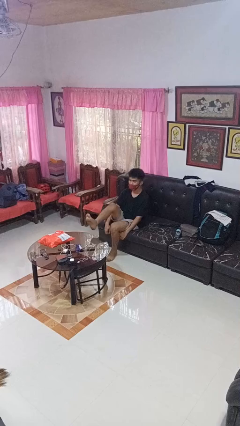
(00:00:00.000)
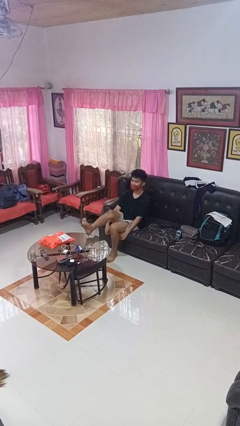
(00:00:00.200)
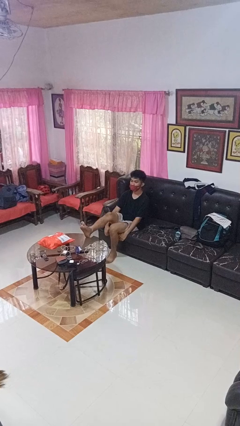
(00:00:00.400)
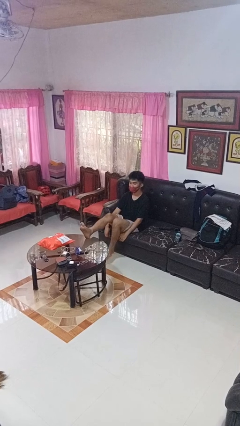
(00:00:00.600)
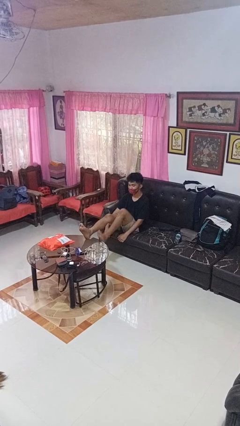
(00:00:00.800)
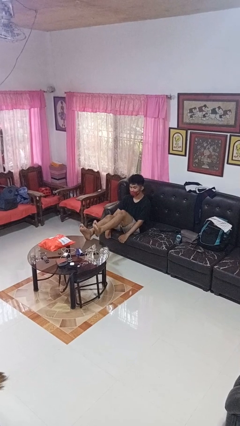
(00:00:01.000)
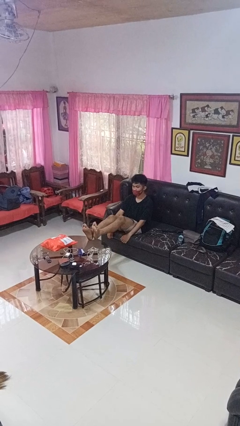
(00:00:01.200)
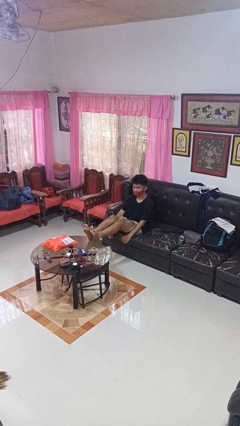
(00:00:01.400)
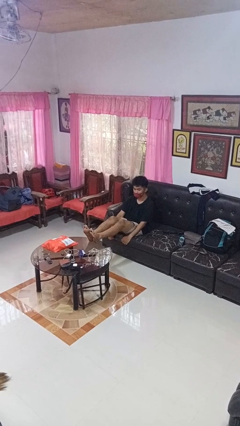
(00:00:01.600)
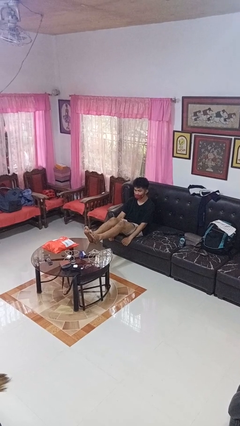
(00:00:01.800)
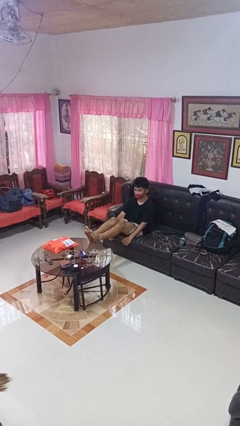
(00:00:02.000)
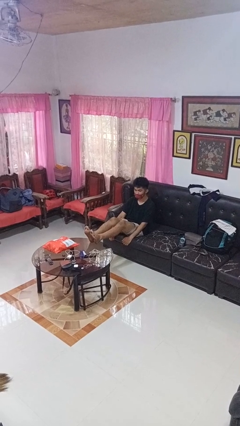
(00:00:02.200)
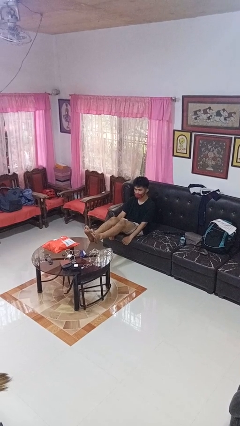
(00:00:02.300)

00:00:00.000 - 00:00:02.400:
person puts feet up

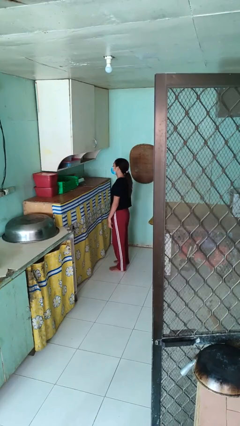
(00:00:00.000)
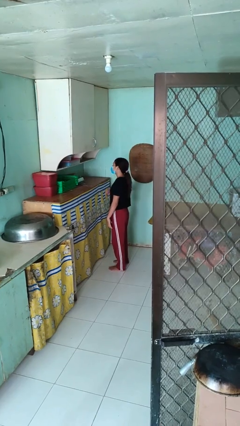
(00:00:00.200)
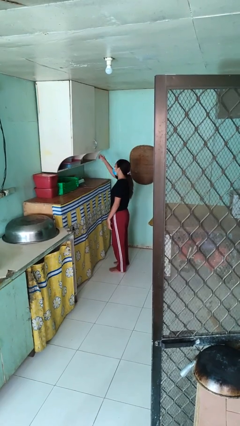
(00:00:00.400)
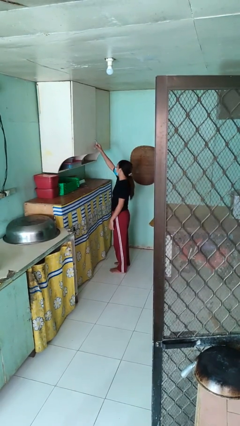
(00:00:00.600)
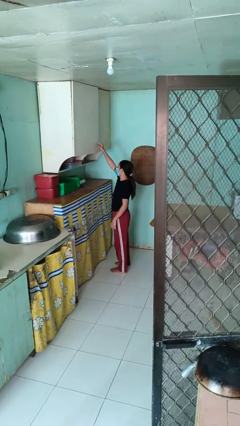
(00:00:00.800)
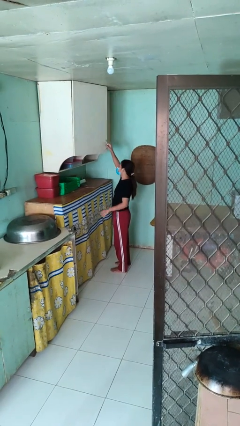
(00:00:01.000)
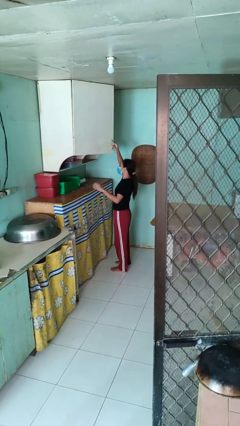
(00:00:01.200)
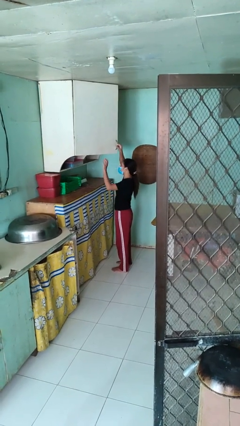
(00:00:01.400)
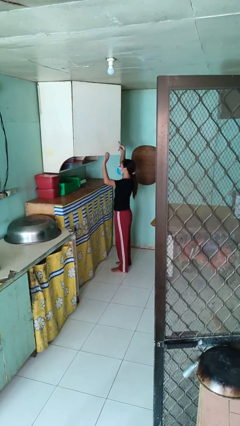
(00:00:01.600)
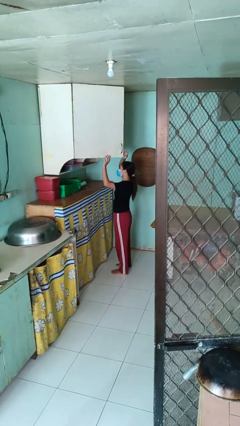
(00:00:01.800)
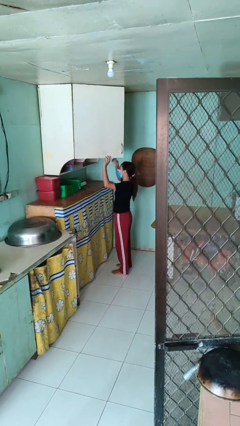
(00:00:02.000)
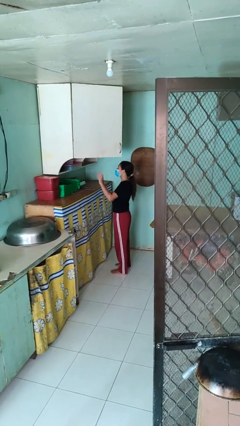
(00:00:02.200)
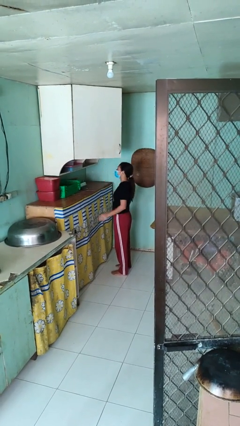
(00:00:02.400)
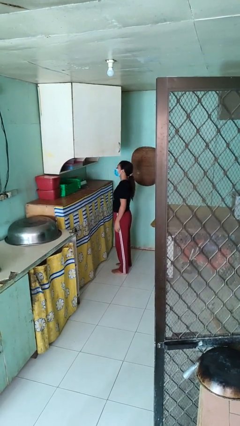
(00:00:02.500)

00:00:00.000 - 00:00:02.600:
person opens cabinet

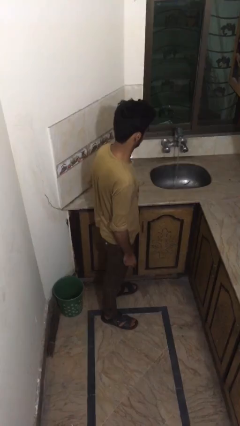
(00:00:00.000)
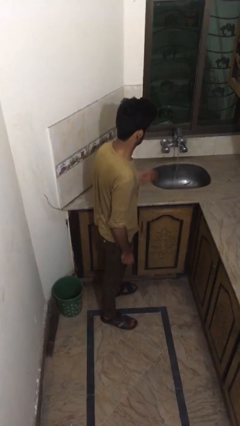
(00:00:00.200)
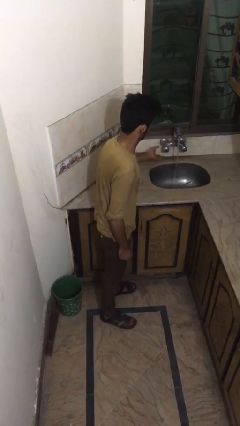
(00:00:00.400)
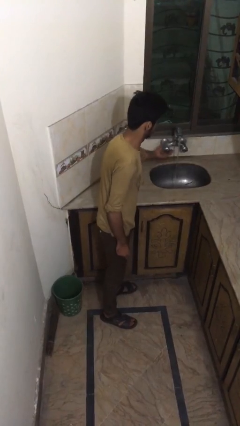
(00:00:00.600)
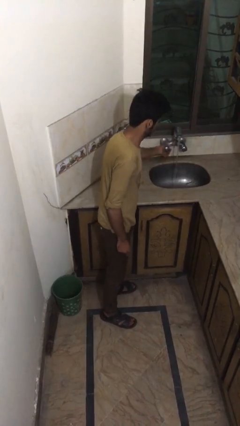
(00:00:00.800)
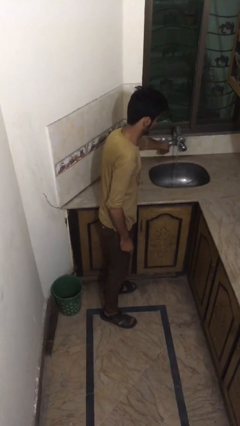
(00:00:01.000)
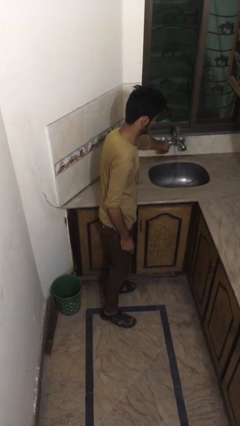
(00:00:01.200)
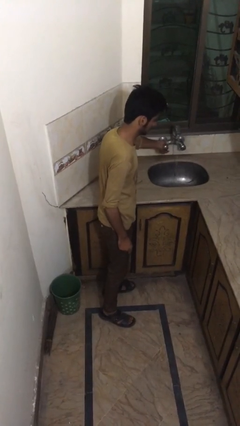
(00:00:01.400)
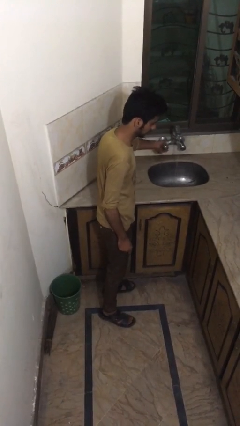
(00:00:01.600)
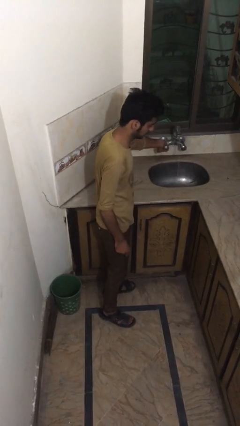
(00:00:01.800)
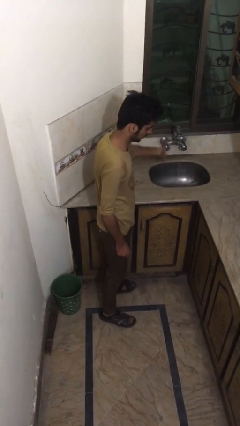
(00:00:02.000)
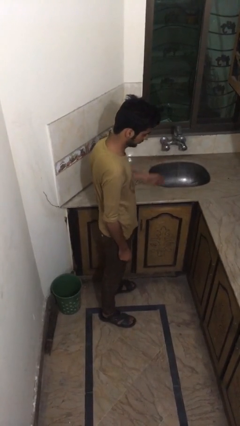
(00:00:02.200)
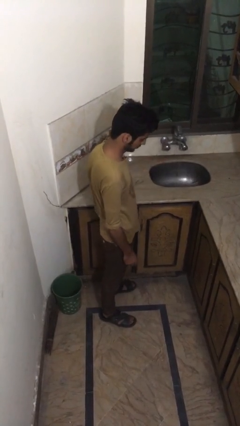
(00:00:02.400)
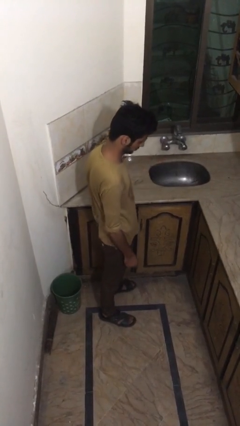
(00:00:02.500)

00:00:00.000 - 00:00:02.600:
person turns off faucet

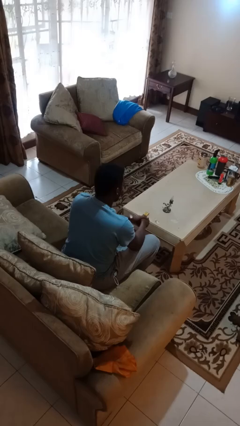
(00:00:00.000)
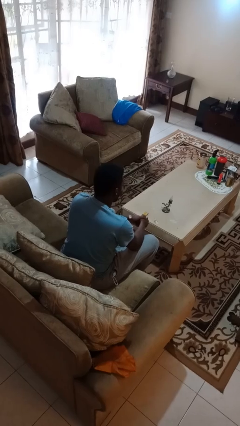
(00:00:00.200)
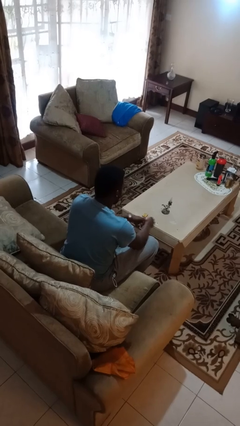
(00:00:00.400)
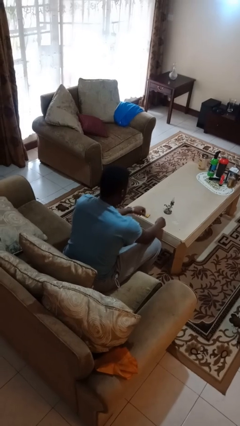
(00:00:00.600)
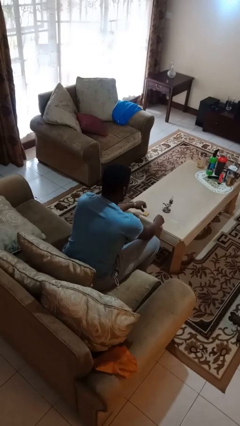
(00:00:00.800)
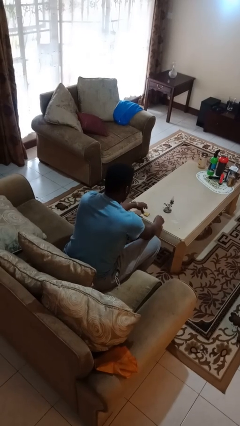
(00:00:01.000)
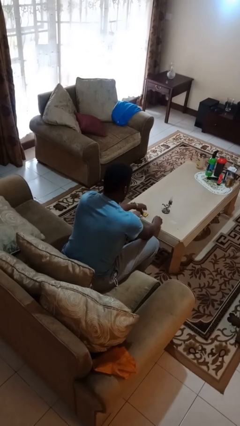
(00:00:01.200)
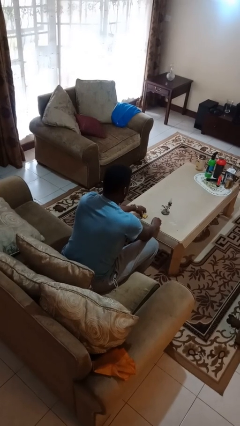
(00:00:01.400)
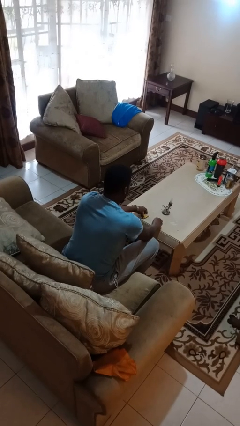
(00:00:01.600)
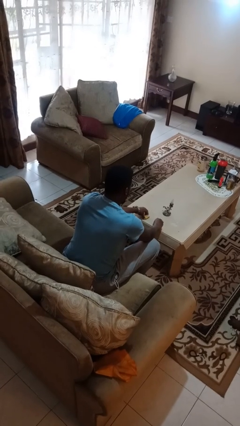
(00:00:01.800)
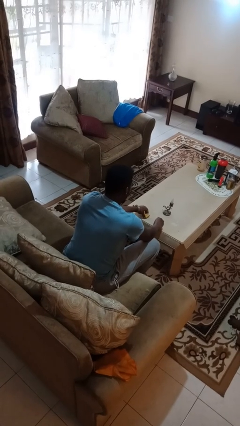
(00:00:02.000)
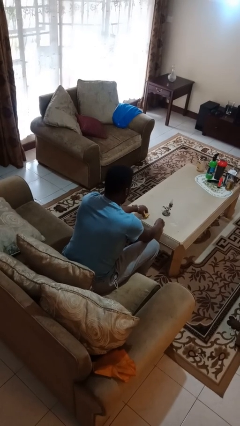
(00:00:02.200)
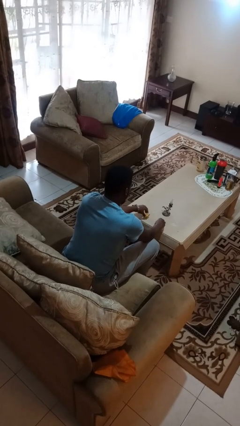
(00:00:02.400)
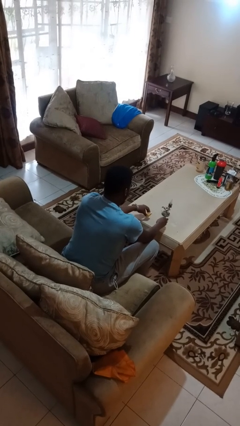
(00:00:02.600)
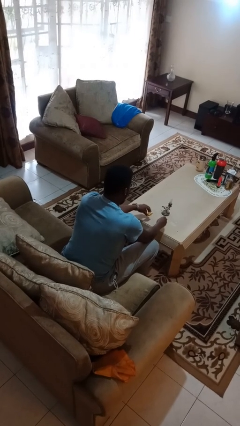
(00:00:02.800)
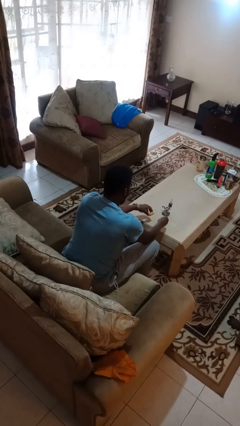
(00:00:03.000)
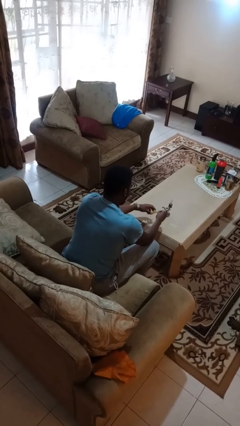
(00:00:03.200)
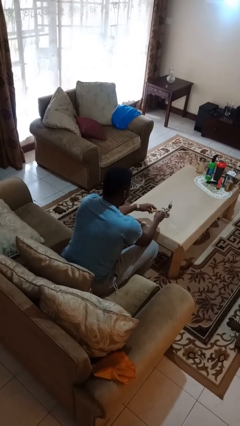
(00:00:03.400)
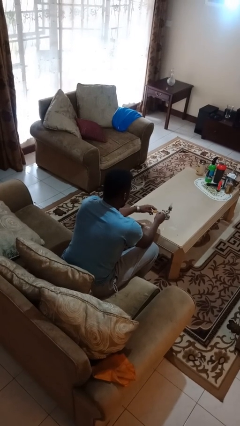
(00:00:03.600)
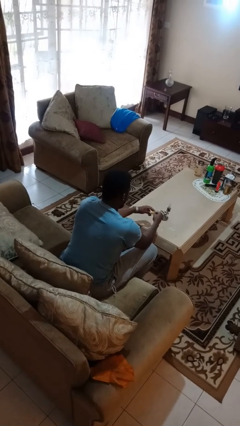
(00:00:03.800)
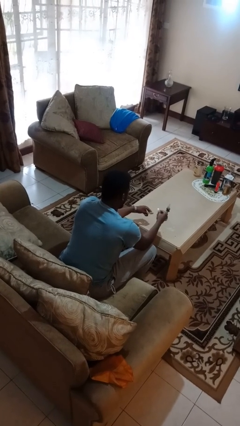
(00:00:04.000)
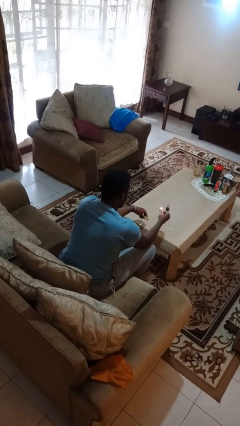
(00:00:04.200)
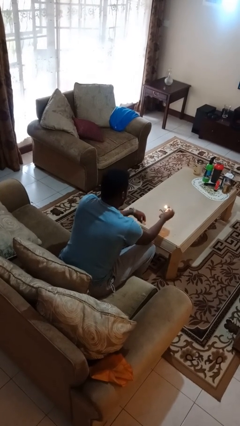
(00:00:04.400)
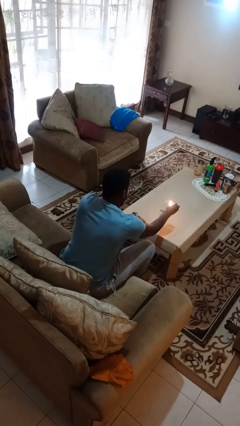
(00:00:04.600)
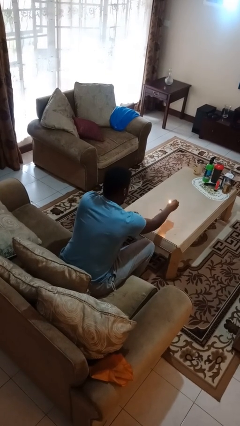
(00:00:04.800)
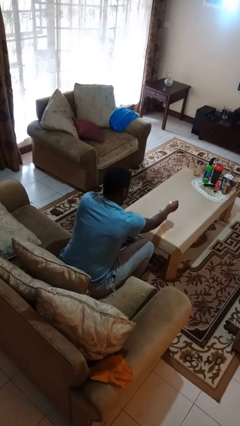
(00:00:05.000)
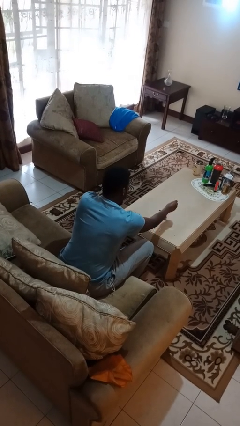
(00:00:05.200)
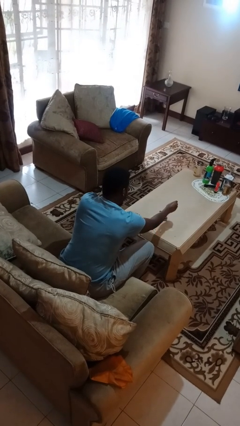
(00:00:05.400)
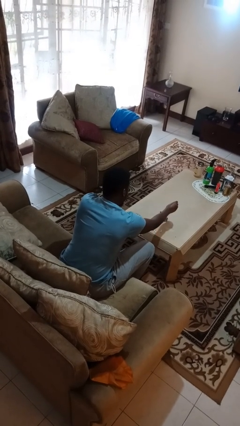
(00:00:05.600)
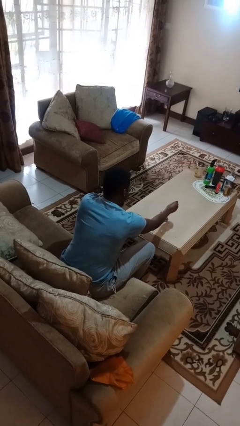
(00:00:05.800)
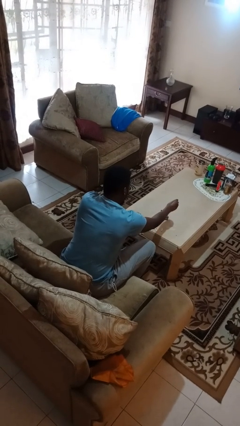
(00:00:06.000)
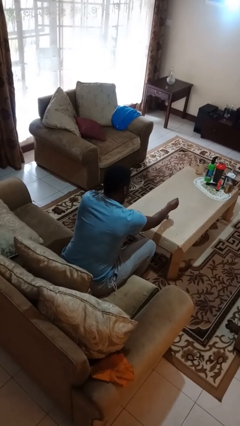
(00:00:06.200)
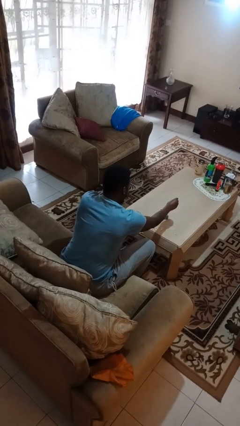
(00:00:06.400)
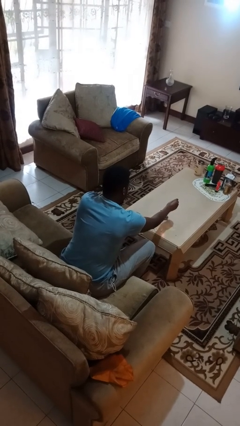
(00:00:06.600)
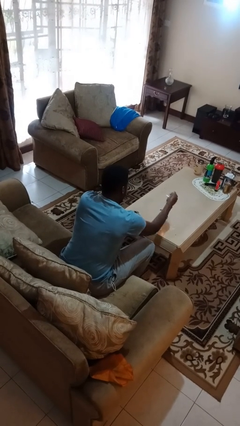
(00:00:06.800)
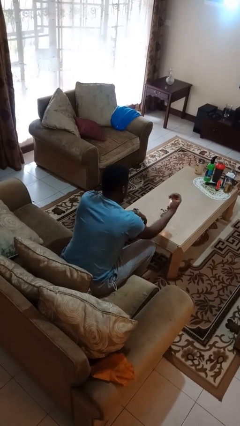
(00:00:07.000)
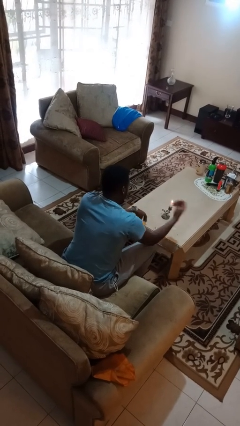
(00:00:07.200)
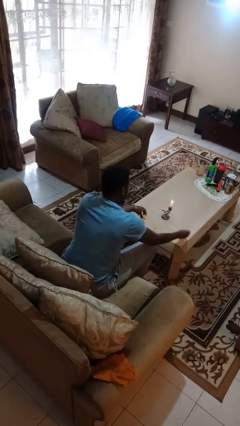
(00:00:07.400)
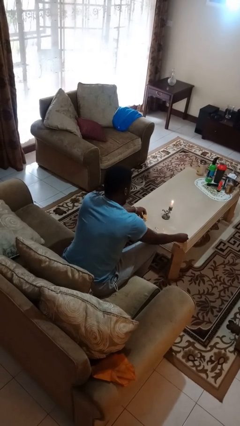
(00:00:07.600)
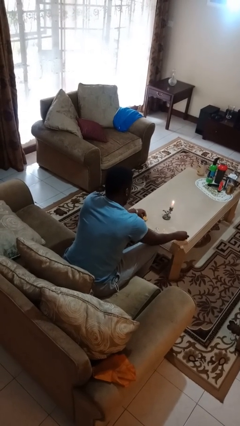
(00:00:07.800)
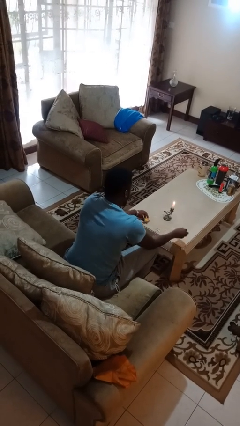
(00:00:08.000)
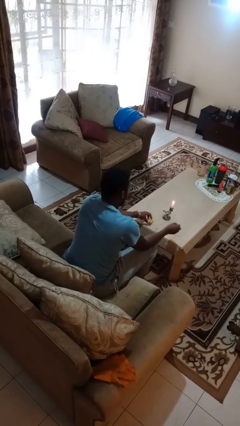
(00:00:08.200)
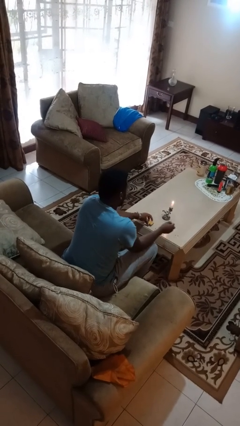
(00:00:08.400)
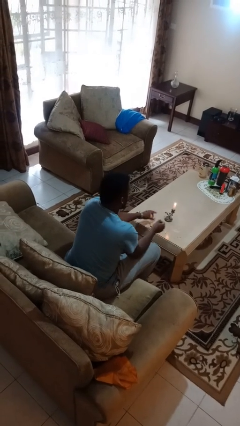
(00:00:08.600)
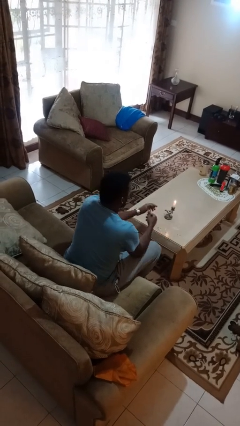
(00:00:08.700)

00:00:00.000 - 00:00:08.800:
person lights candle

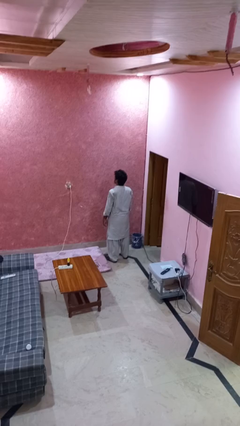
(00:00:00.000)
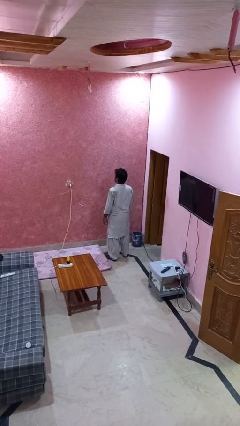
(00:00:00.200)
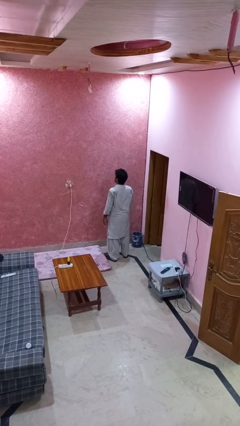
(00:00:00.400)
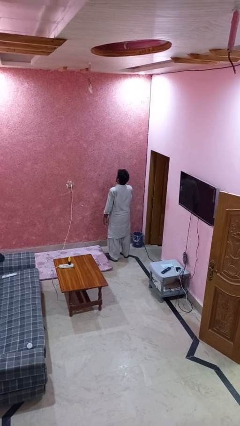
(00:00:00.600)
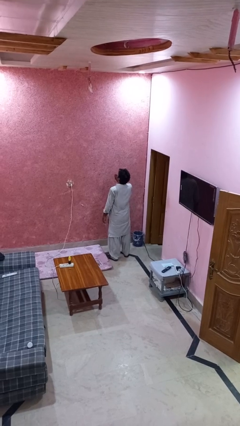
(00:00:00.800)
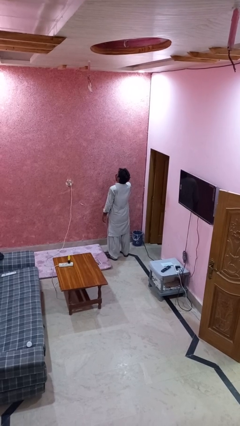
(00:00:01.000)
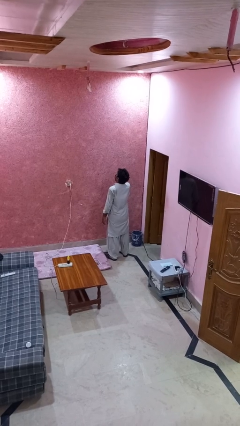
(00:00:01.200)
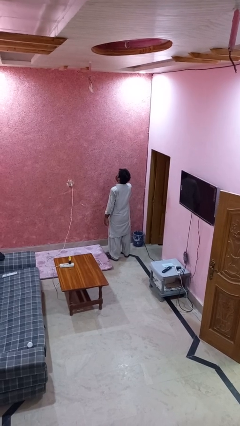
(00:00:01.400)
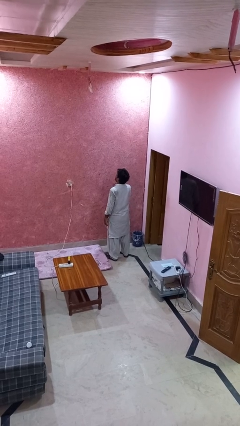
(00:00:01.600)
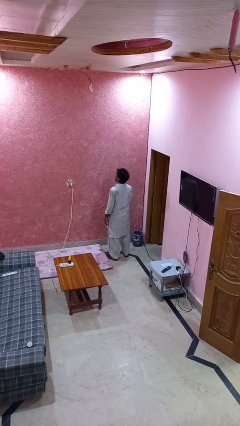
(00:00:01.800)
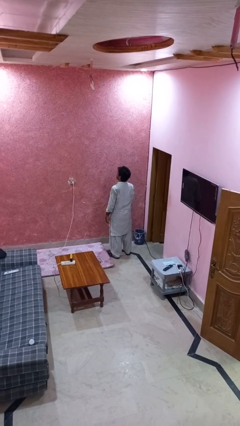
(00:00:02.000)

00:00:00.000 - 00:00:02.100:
person yawns
